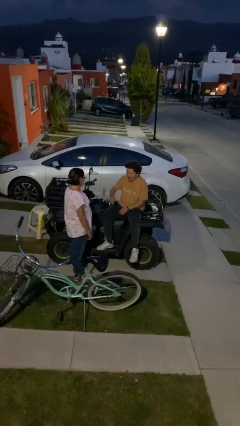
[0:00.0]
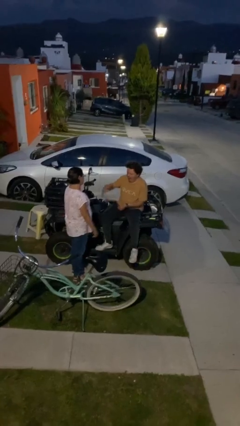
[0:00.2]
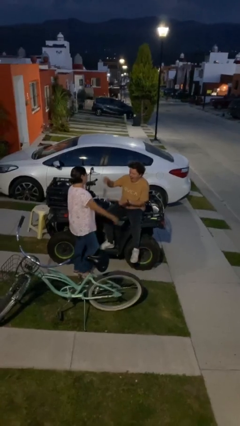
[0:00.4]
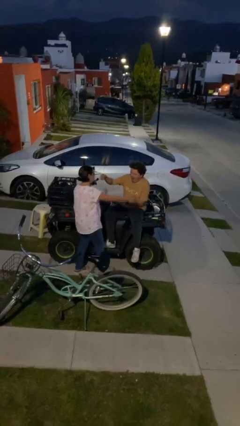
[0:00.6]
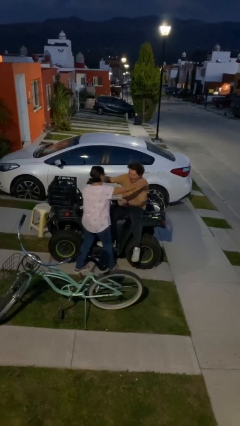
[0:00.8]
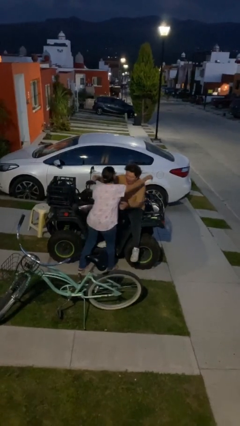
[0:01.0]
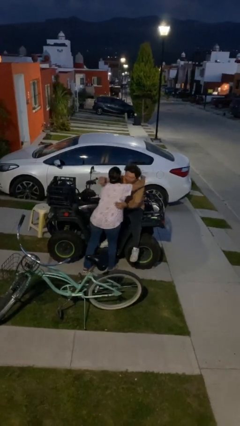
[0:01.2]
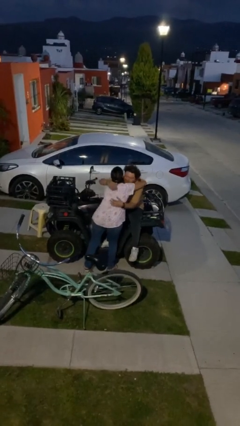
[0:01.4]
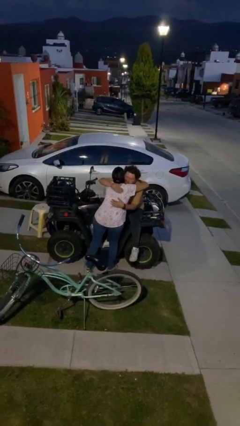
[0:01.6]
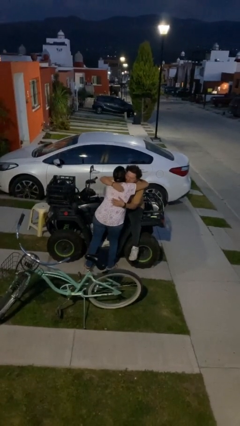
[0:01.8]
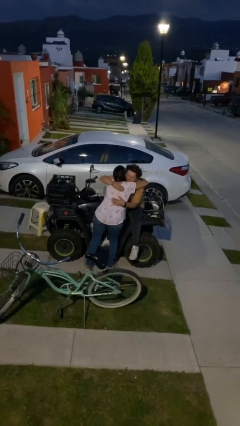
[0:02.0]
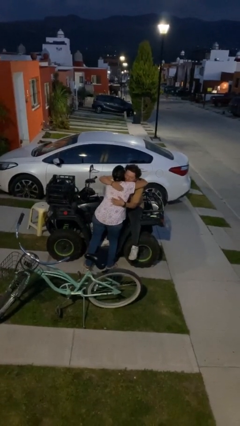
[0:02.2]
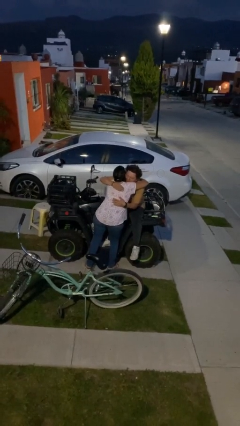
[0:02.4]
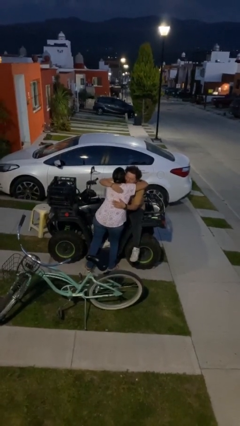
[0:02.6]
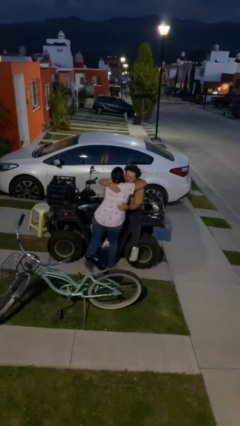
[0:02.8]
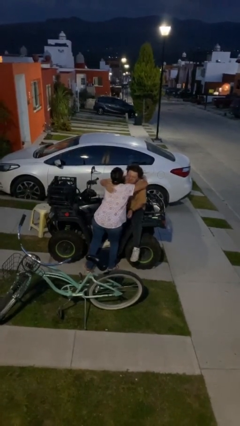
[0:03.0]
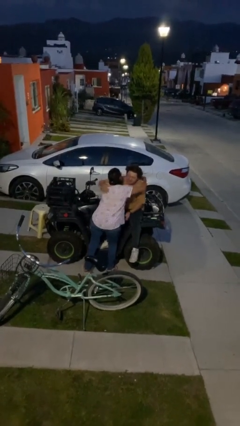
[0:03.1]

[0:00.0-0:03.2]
person embraces person

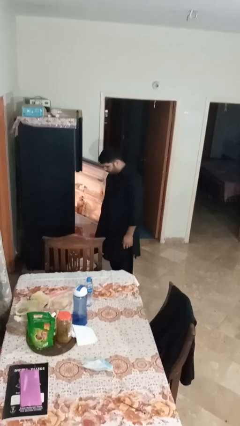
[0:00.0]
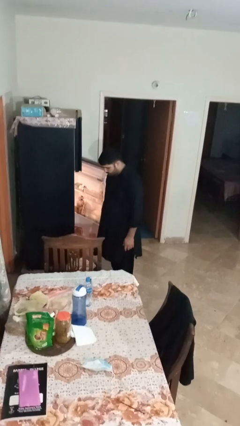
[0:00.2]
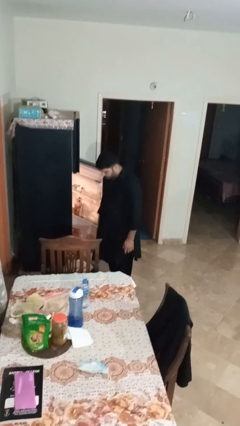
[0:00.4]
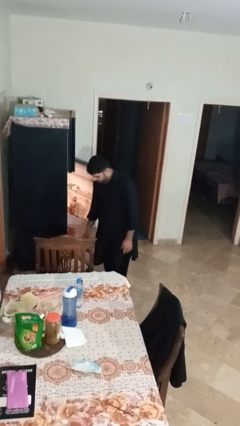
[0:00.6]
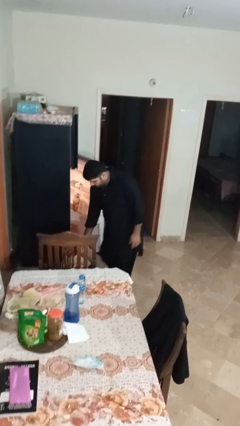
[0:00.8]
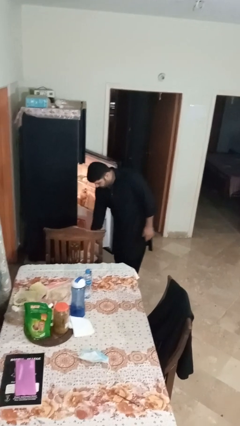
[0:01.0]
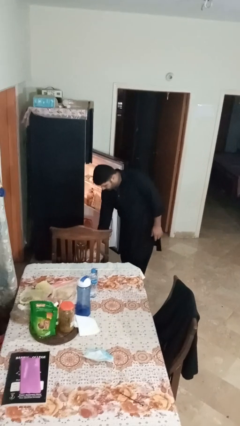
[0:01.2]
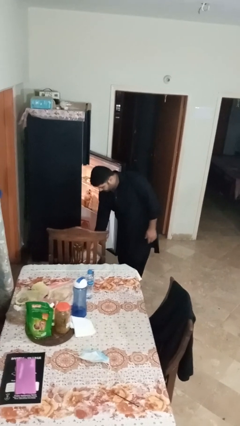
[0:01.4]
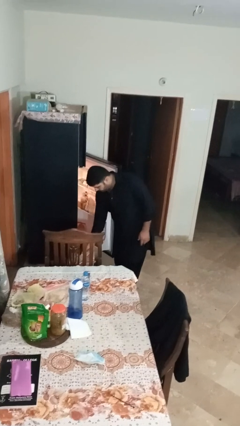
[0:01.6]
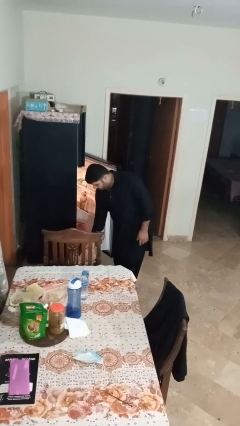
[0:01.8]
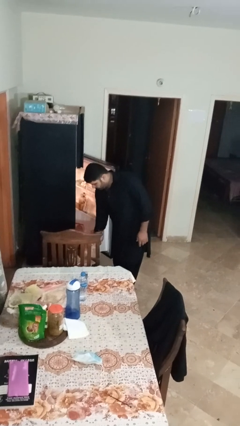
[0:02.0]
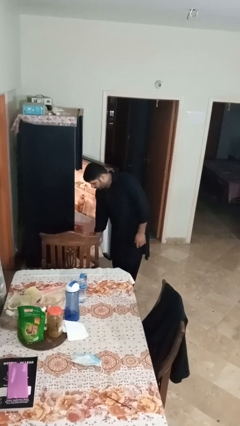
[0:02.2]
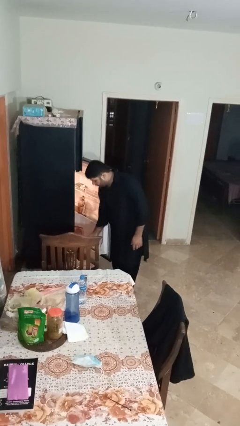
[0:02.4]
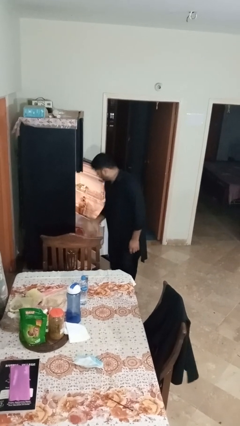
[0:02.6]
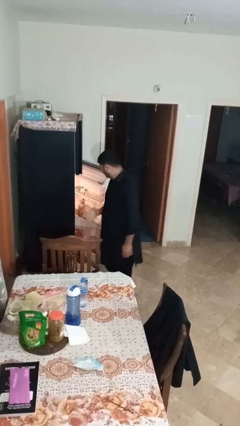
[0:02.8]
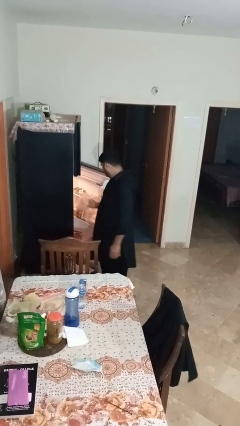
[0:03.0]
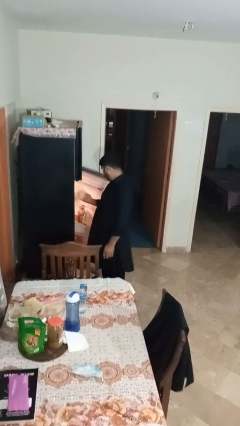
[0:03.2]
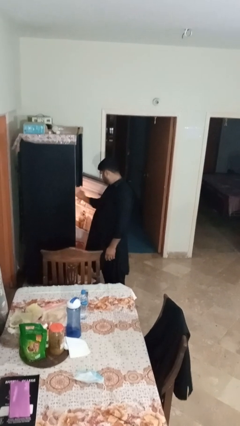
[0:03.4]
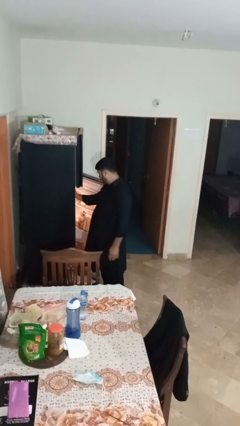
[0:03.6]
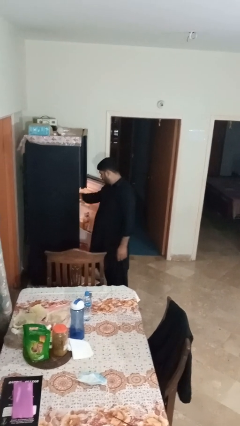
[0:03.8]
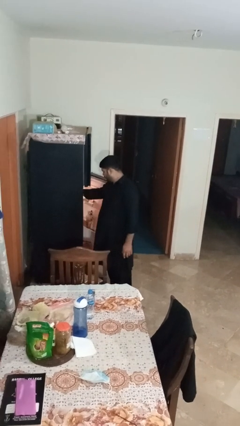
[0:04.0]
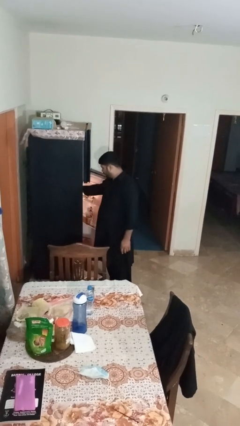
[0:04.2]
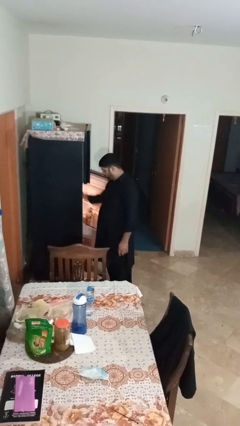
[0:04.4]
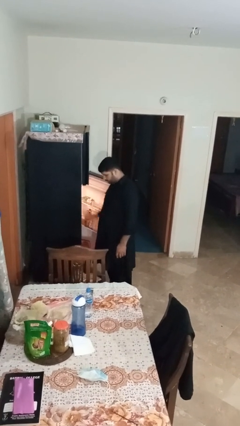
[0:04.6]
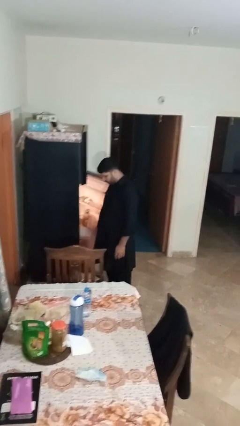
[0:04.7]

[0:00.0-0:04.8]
person loads groceries into refrigerator

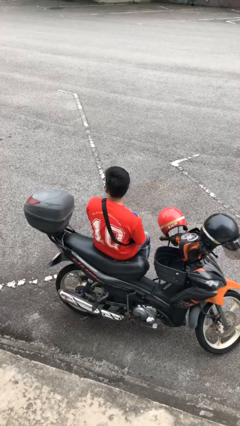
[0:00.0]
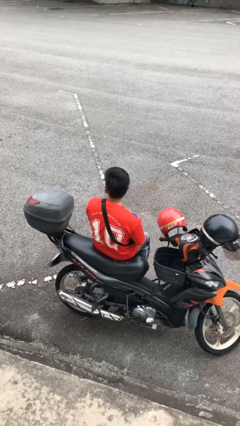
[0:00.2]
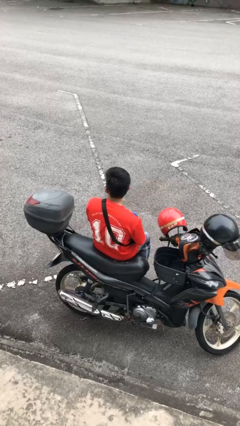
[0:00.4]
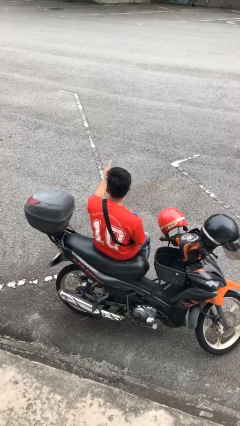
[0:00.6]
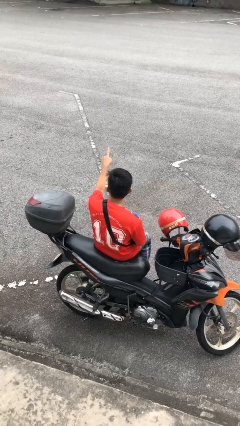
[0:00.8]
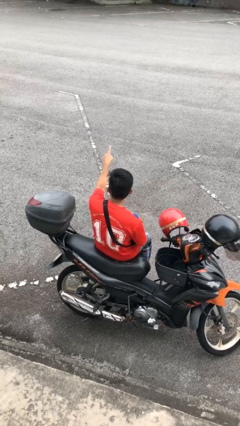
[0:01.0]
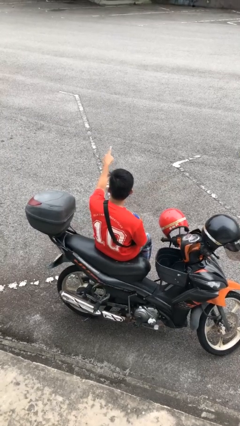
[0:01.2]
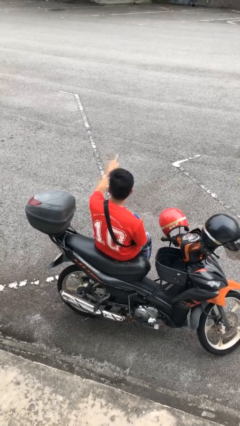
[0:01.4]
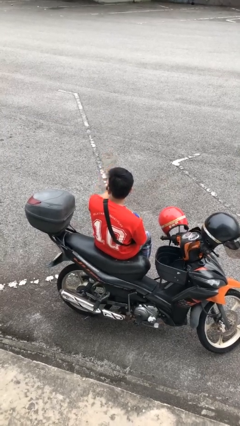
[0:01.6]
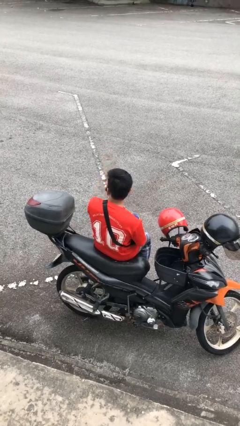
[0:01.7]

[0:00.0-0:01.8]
person points at person

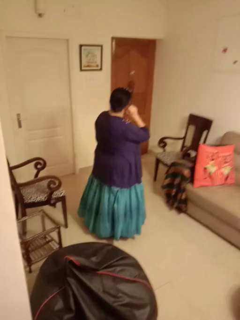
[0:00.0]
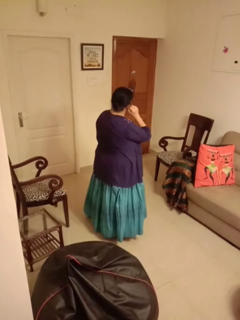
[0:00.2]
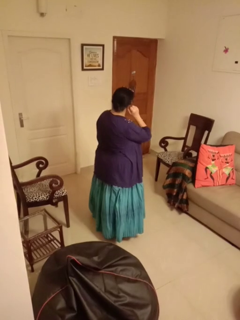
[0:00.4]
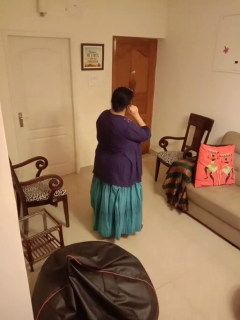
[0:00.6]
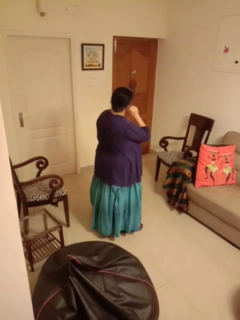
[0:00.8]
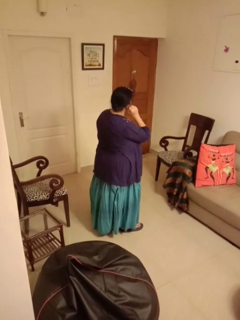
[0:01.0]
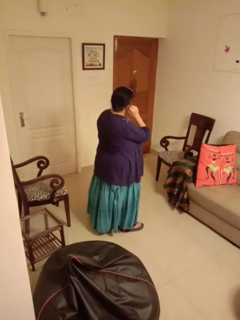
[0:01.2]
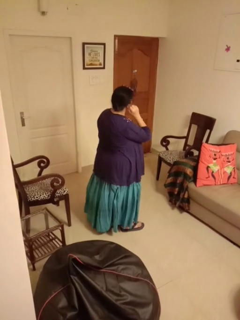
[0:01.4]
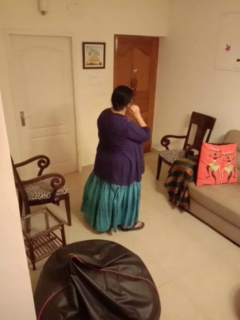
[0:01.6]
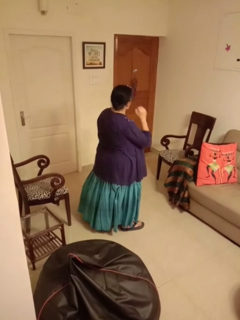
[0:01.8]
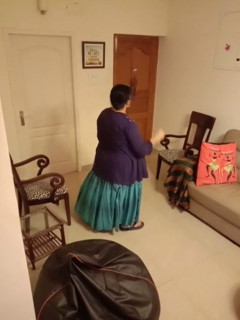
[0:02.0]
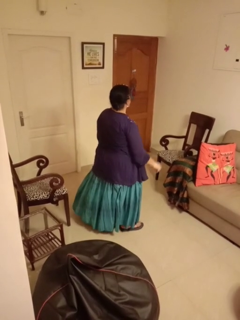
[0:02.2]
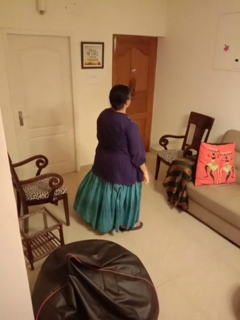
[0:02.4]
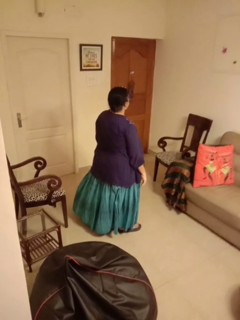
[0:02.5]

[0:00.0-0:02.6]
person touches earlobe

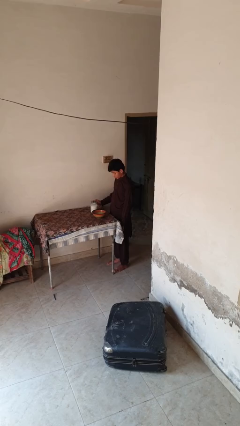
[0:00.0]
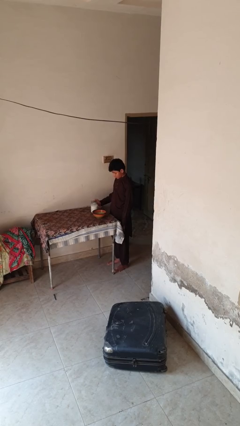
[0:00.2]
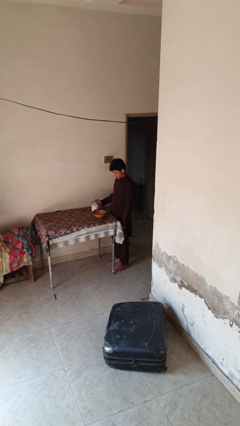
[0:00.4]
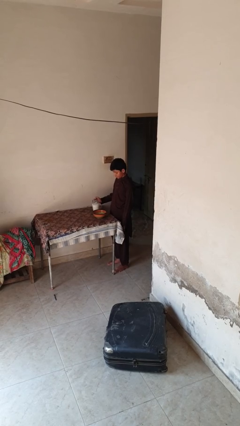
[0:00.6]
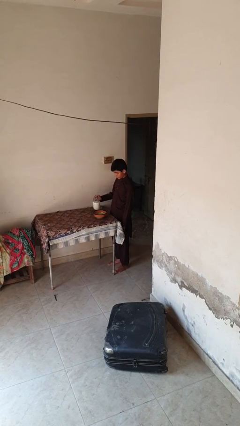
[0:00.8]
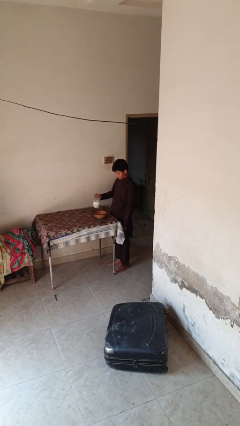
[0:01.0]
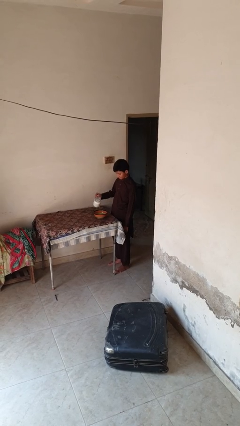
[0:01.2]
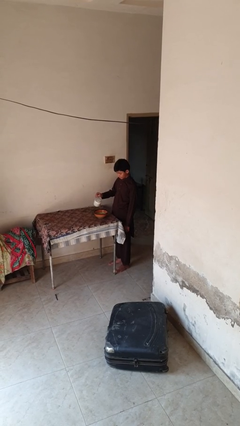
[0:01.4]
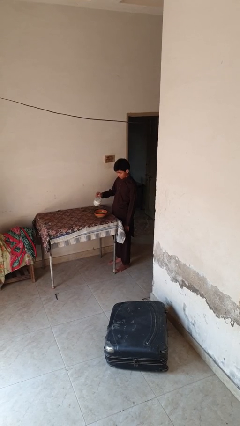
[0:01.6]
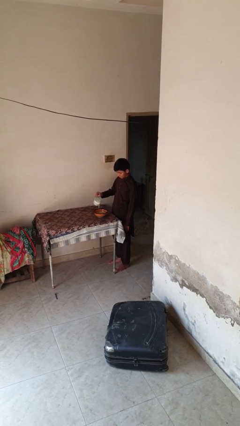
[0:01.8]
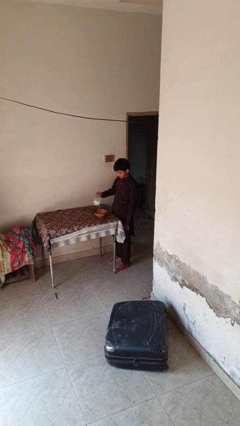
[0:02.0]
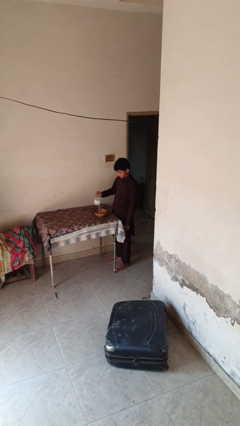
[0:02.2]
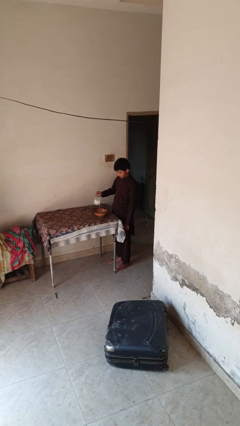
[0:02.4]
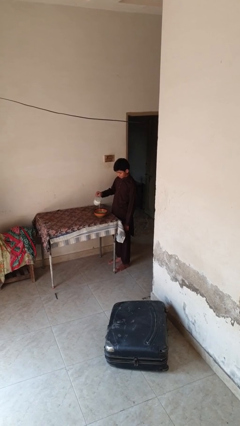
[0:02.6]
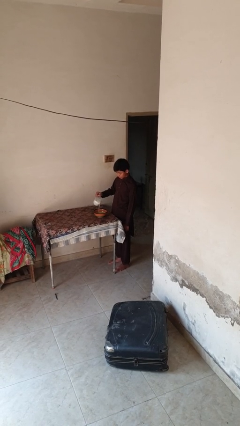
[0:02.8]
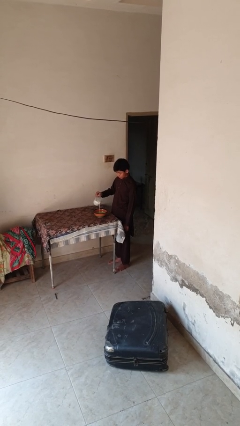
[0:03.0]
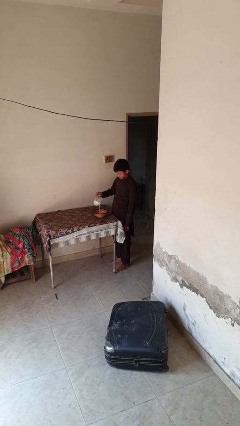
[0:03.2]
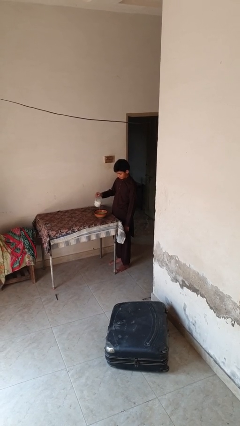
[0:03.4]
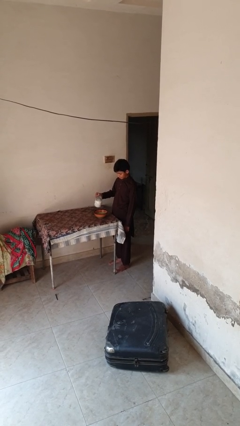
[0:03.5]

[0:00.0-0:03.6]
person pours into bowl

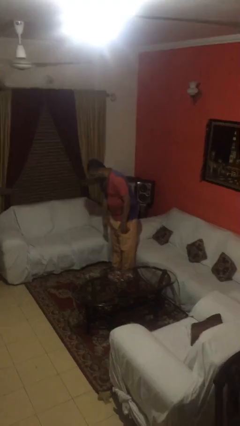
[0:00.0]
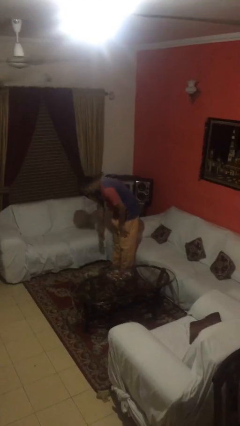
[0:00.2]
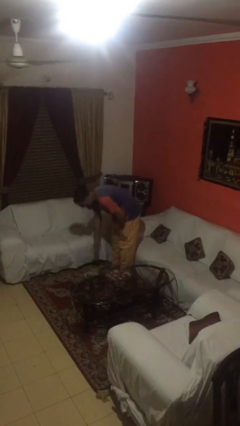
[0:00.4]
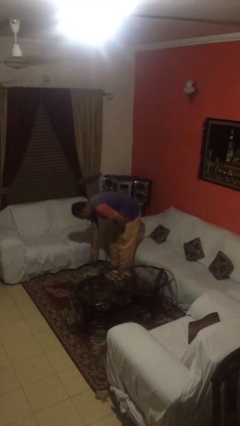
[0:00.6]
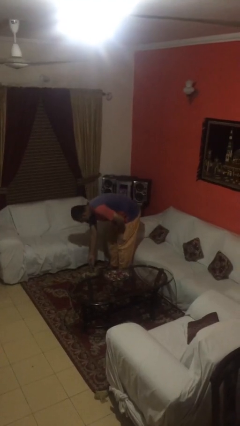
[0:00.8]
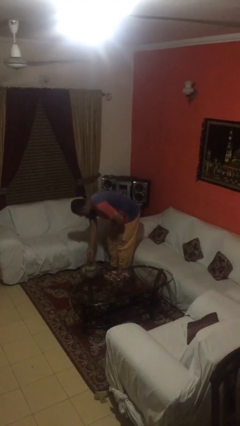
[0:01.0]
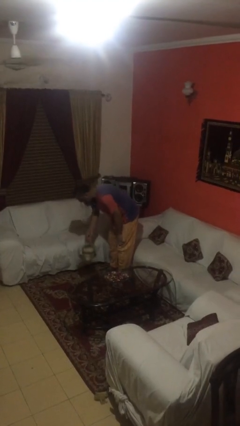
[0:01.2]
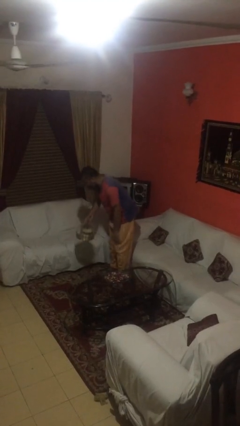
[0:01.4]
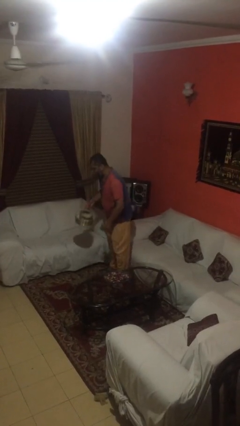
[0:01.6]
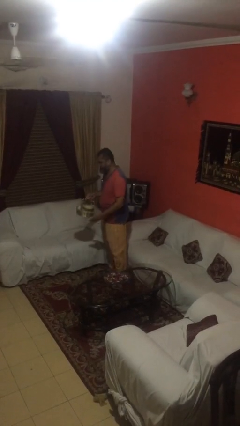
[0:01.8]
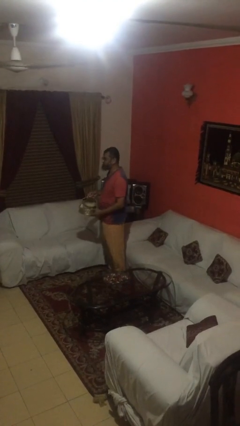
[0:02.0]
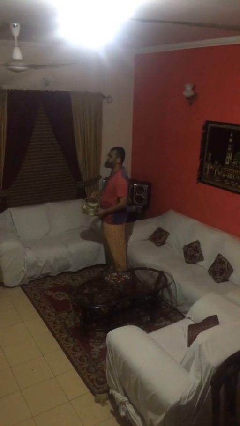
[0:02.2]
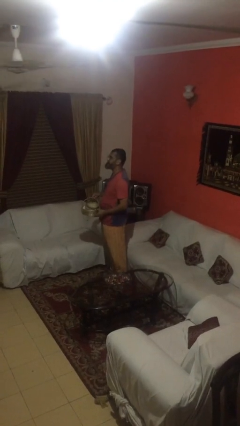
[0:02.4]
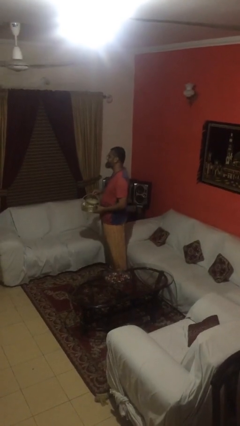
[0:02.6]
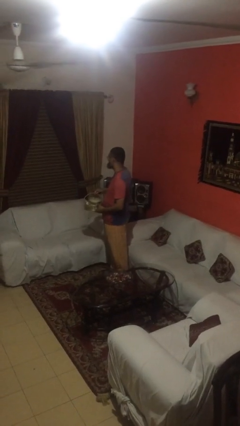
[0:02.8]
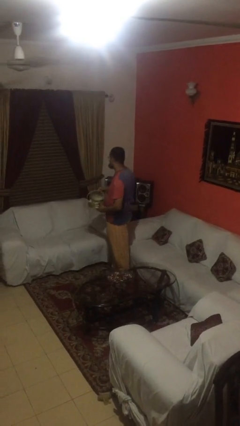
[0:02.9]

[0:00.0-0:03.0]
person picks up object from floor
